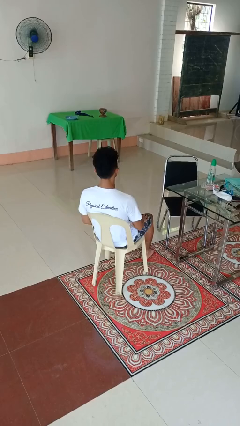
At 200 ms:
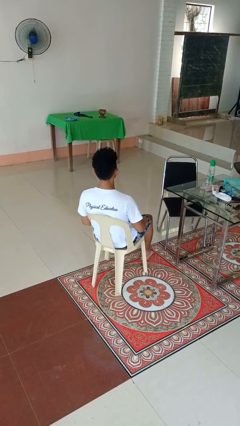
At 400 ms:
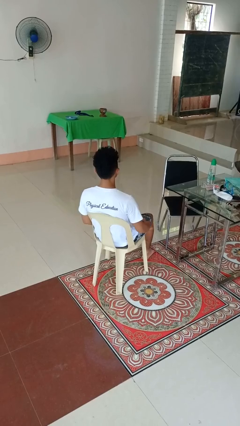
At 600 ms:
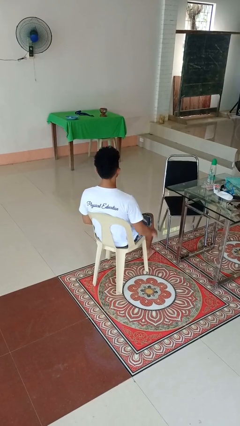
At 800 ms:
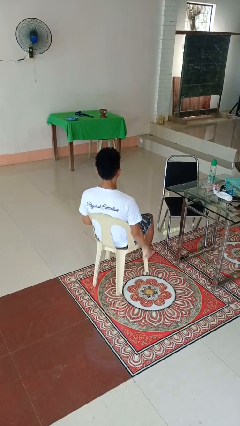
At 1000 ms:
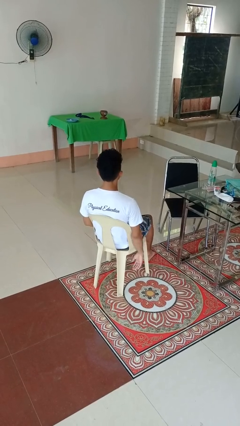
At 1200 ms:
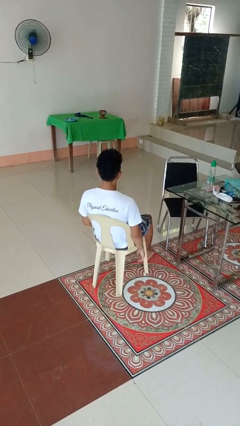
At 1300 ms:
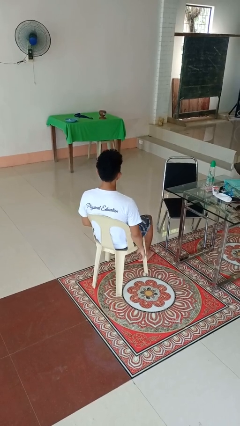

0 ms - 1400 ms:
person slaps hands on thighs

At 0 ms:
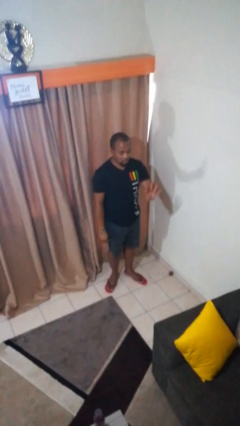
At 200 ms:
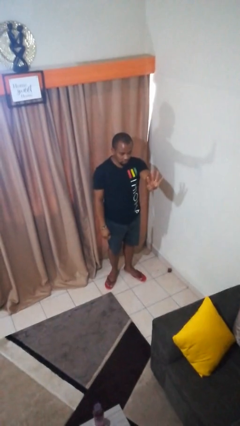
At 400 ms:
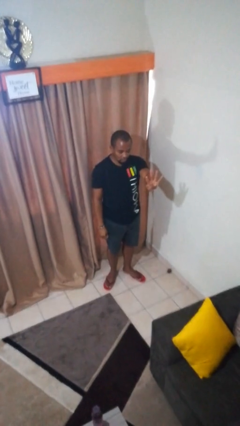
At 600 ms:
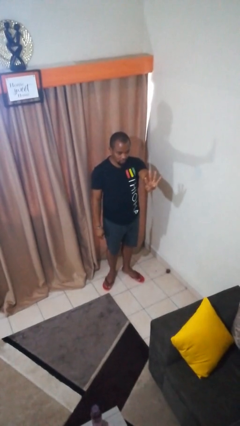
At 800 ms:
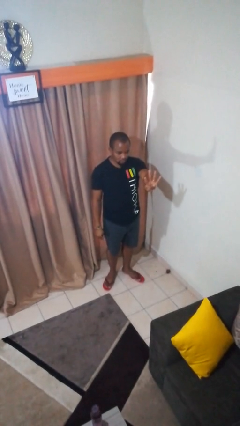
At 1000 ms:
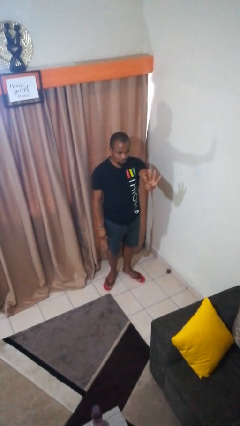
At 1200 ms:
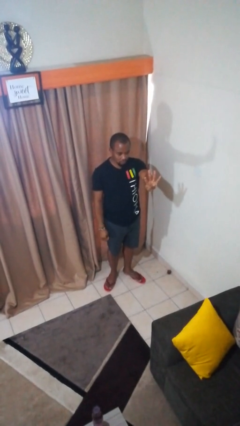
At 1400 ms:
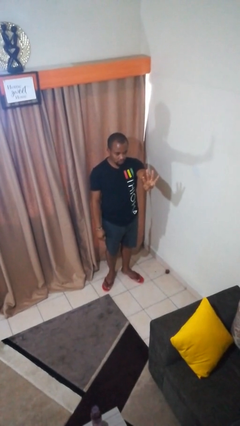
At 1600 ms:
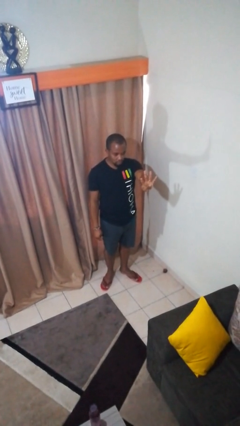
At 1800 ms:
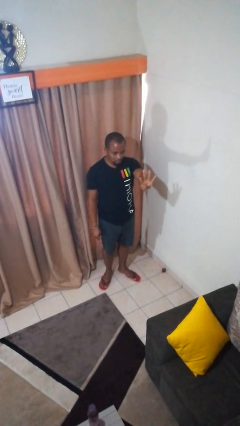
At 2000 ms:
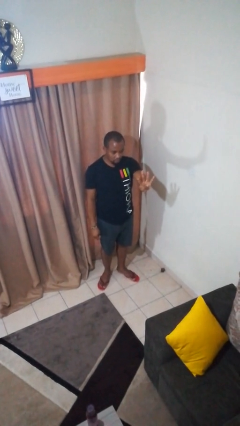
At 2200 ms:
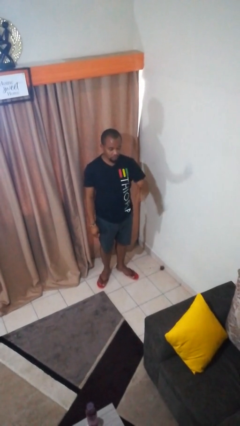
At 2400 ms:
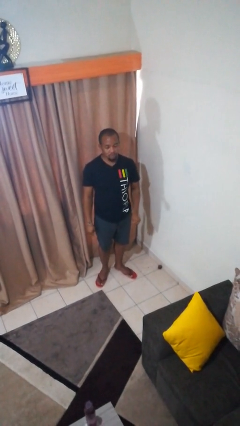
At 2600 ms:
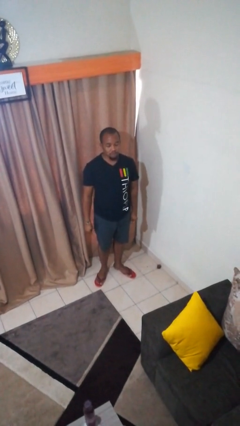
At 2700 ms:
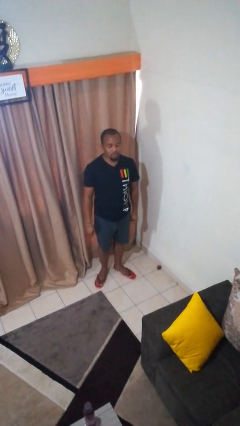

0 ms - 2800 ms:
person gestures number four

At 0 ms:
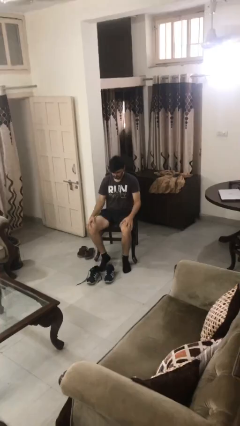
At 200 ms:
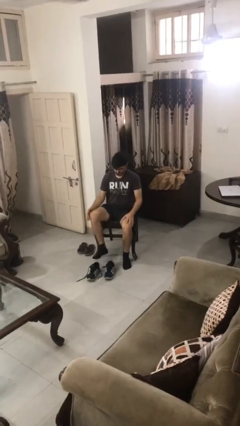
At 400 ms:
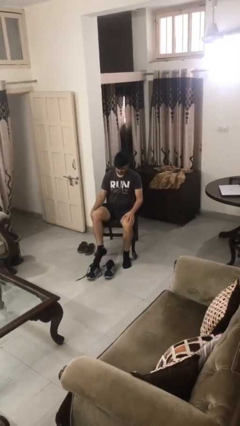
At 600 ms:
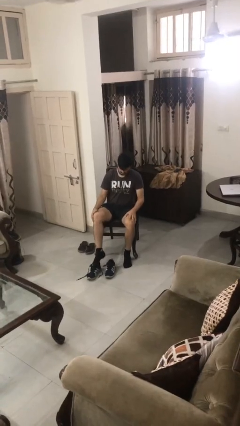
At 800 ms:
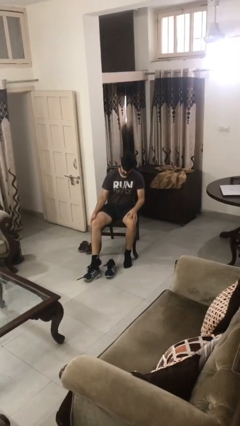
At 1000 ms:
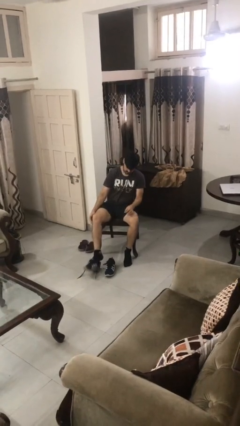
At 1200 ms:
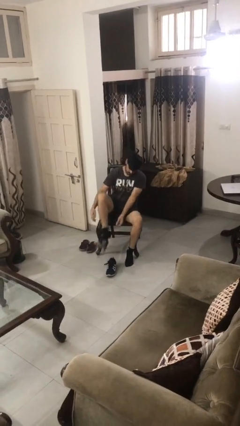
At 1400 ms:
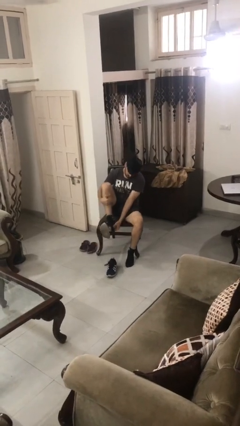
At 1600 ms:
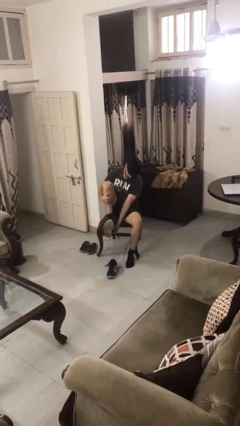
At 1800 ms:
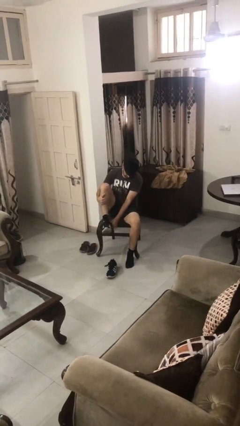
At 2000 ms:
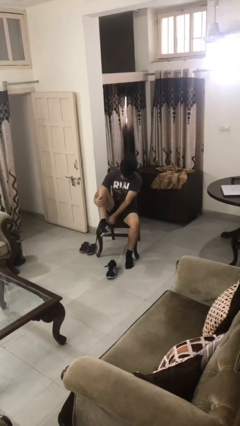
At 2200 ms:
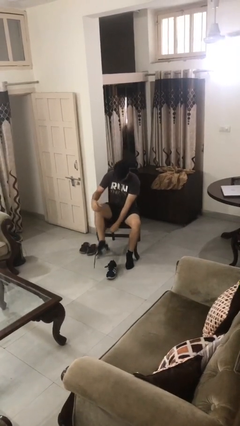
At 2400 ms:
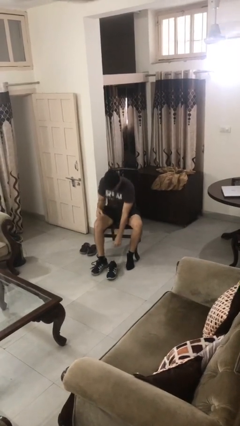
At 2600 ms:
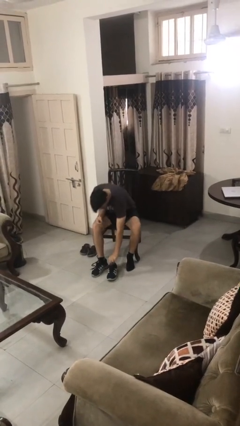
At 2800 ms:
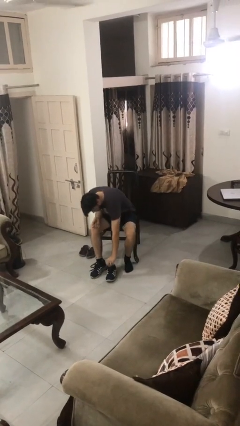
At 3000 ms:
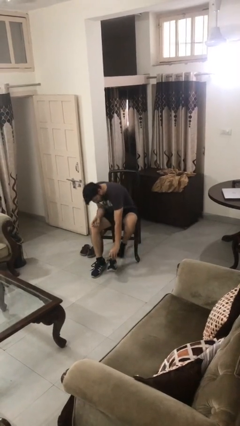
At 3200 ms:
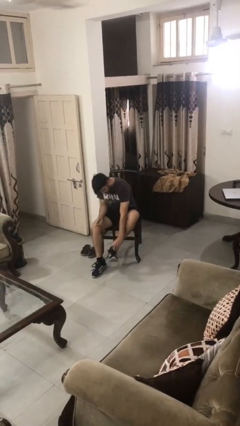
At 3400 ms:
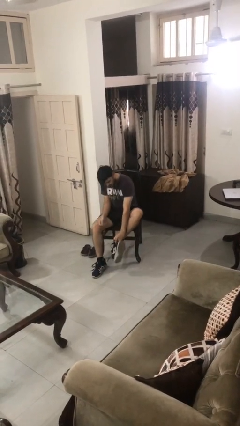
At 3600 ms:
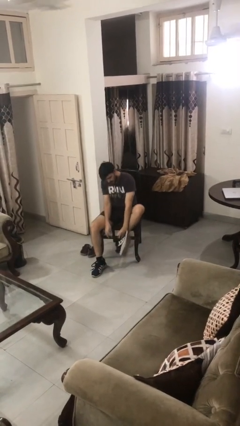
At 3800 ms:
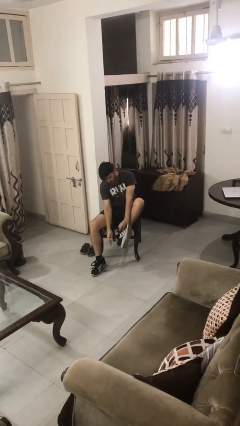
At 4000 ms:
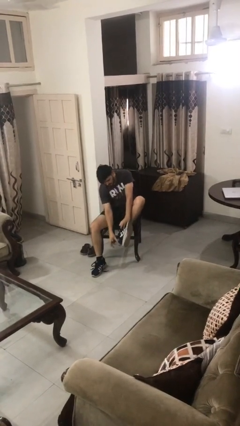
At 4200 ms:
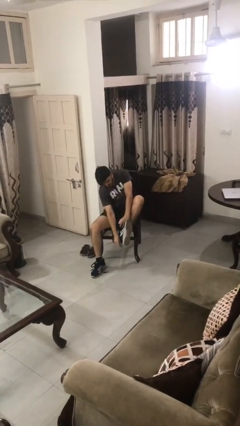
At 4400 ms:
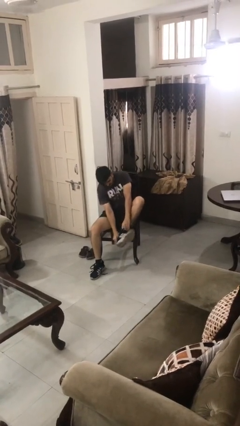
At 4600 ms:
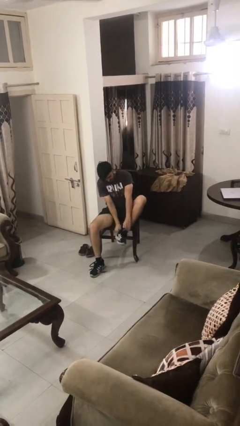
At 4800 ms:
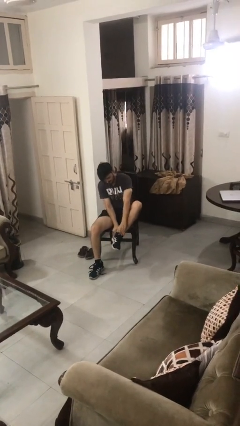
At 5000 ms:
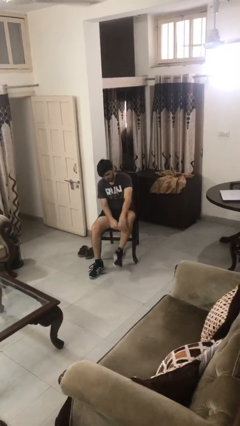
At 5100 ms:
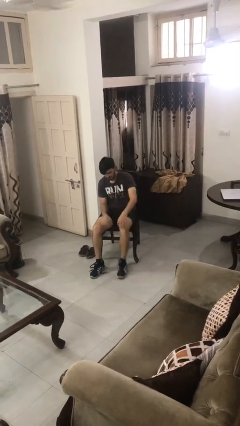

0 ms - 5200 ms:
person puts on shoes

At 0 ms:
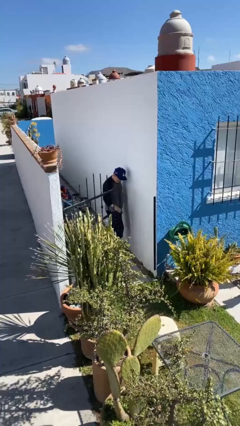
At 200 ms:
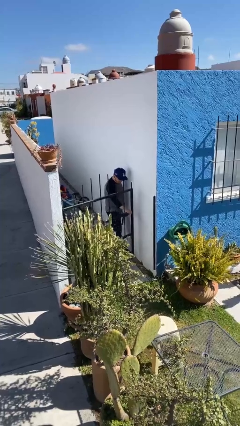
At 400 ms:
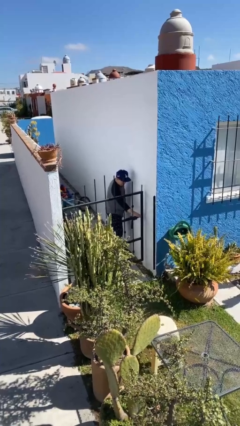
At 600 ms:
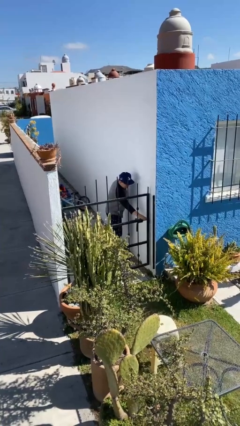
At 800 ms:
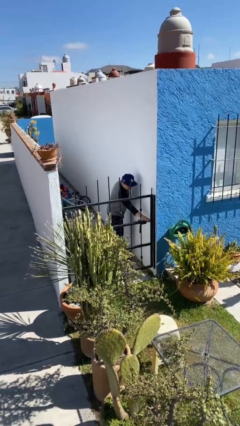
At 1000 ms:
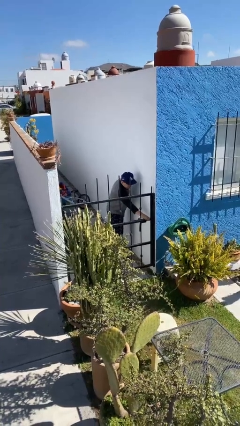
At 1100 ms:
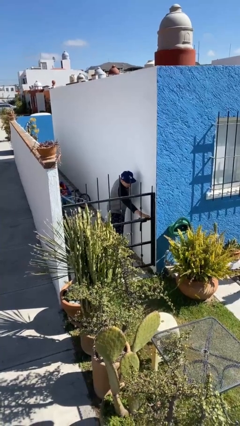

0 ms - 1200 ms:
person closes facility door

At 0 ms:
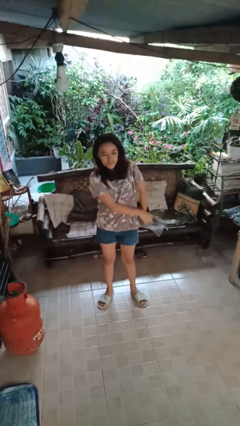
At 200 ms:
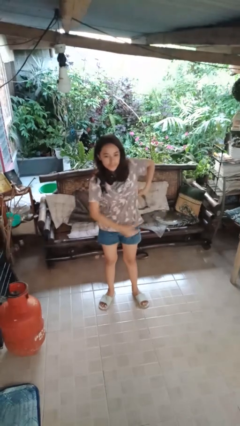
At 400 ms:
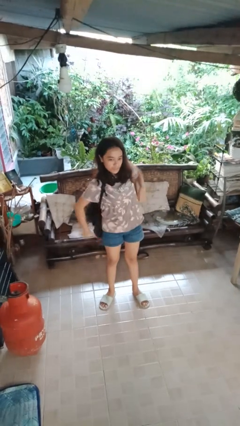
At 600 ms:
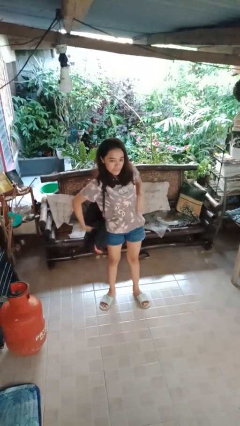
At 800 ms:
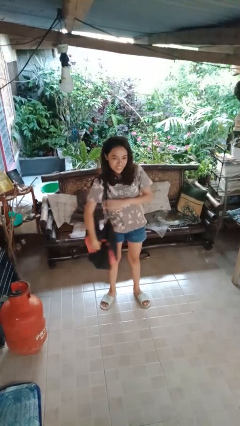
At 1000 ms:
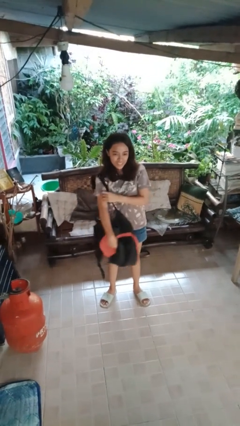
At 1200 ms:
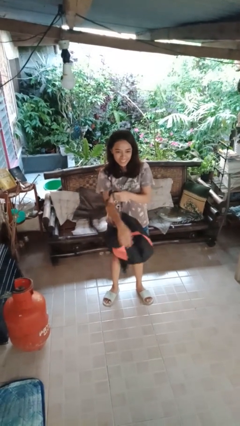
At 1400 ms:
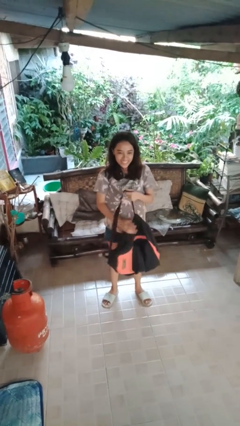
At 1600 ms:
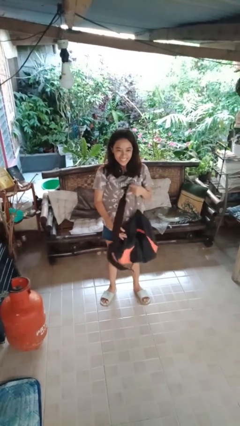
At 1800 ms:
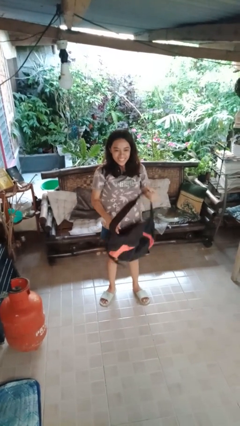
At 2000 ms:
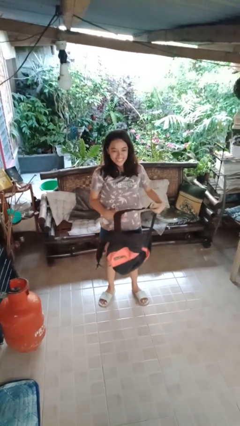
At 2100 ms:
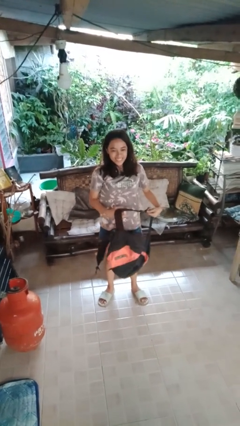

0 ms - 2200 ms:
person takes off backpack

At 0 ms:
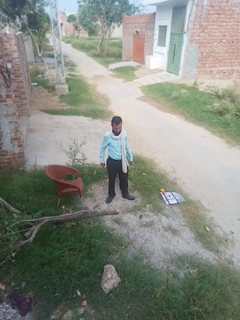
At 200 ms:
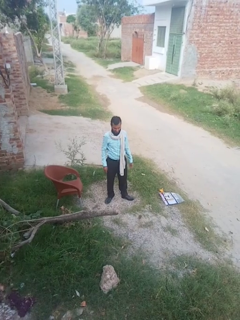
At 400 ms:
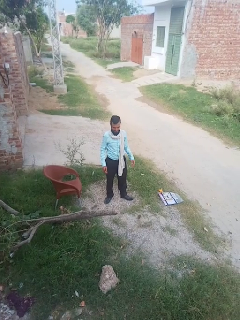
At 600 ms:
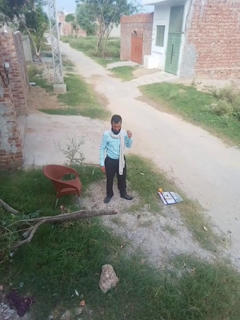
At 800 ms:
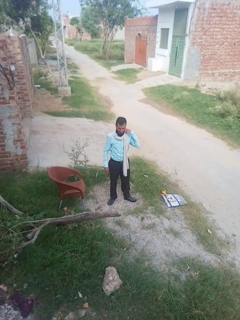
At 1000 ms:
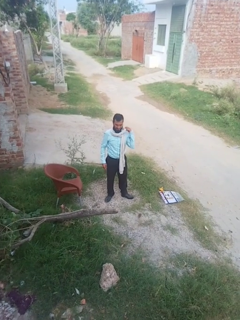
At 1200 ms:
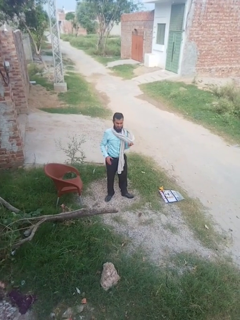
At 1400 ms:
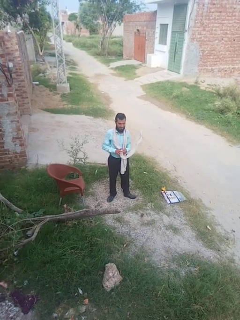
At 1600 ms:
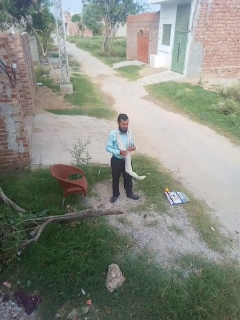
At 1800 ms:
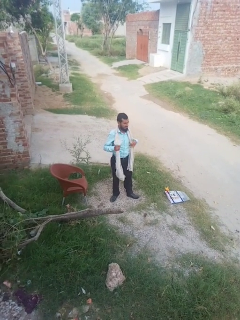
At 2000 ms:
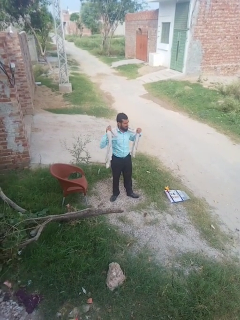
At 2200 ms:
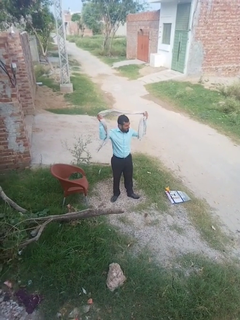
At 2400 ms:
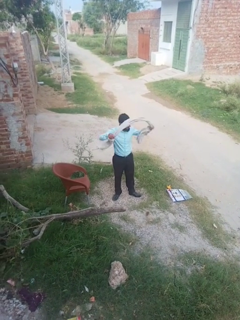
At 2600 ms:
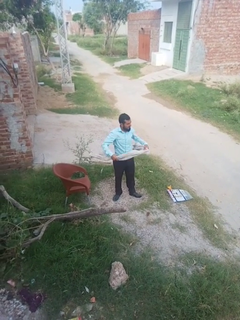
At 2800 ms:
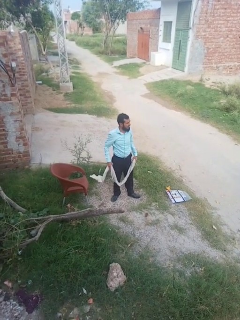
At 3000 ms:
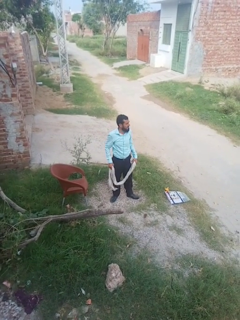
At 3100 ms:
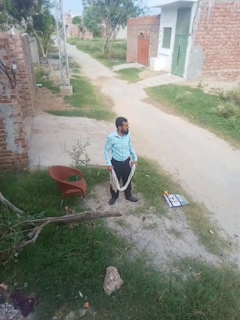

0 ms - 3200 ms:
person takes off scarf

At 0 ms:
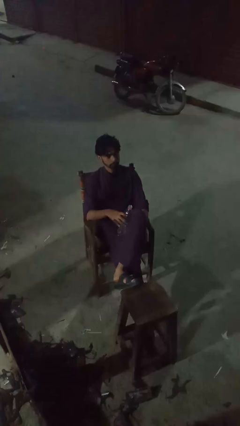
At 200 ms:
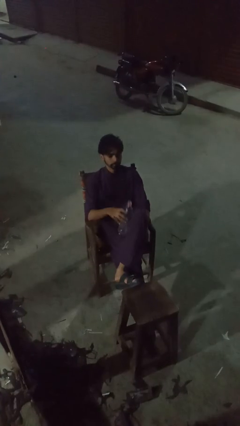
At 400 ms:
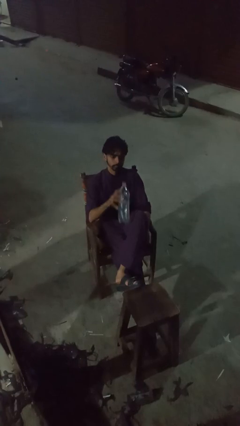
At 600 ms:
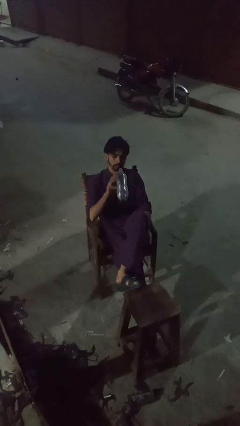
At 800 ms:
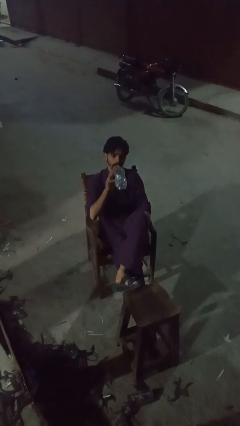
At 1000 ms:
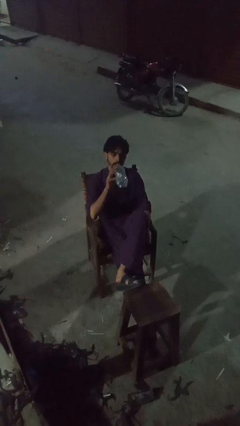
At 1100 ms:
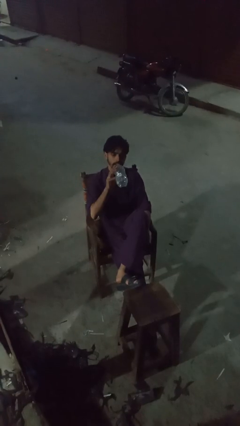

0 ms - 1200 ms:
person drinks from bottle

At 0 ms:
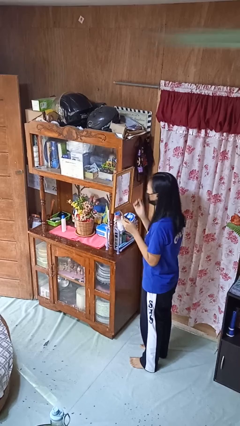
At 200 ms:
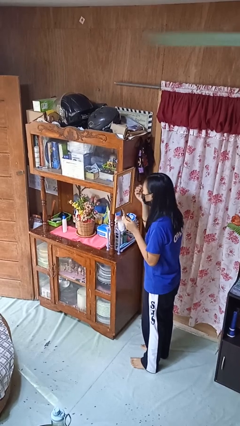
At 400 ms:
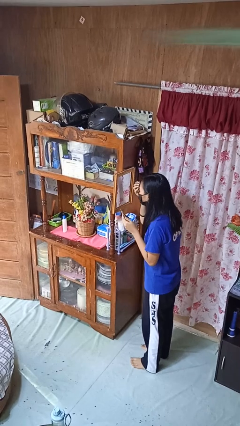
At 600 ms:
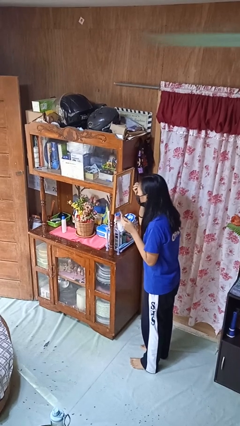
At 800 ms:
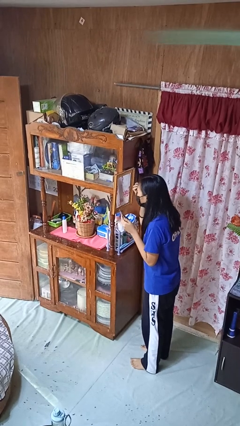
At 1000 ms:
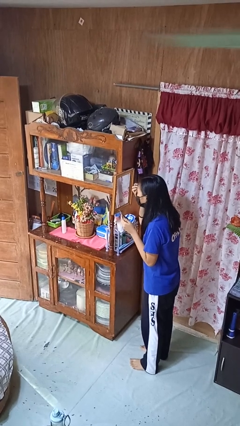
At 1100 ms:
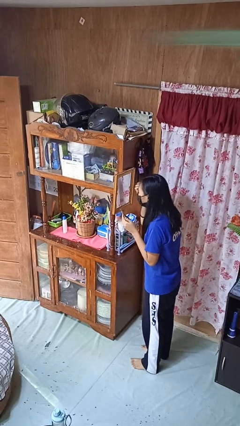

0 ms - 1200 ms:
person applies eye makeup
